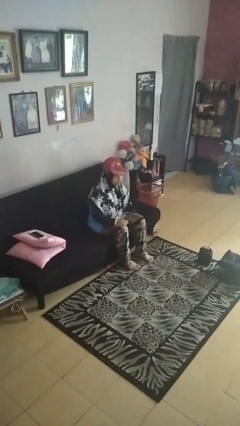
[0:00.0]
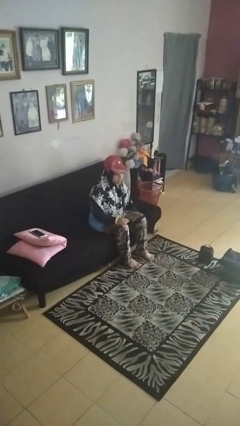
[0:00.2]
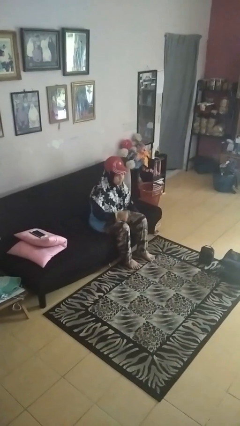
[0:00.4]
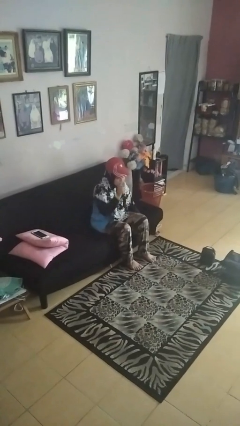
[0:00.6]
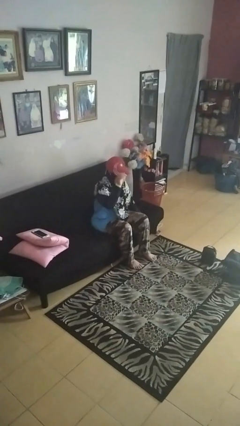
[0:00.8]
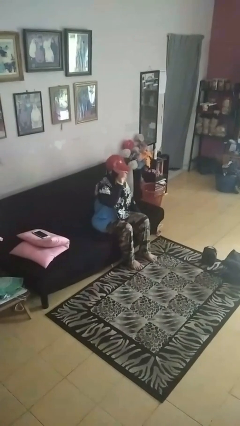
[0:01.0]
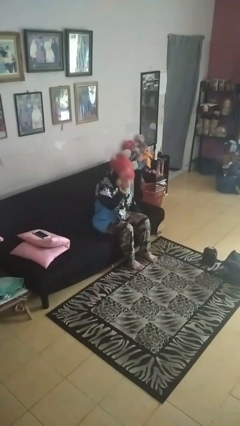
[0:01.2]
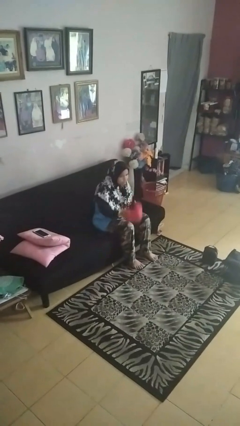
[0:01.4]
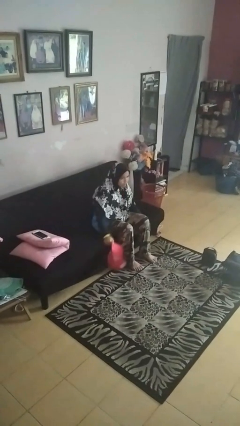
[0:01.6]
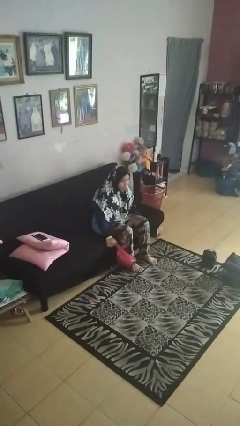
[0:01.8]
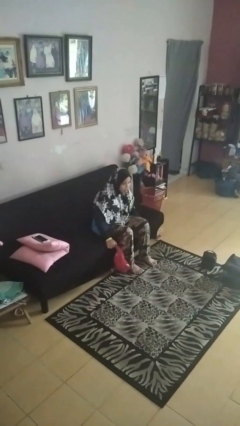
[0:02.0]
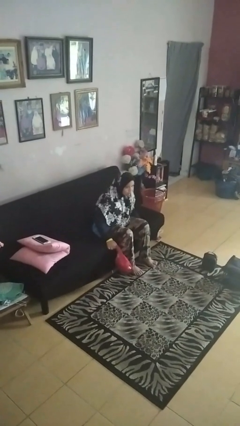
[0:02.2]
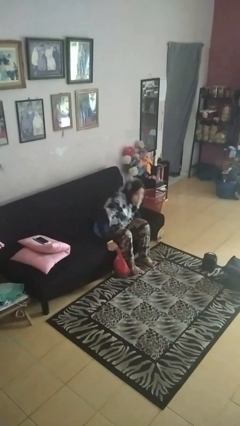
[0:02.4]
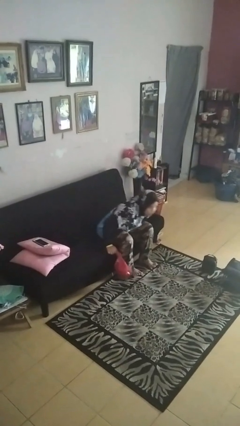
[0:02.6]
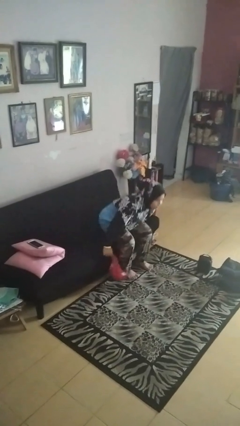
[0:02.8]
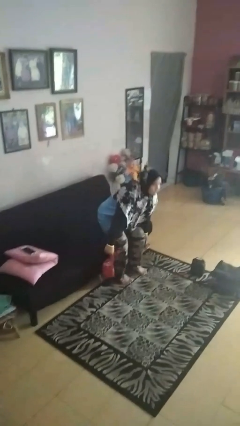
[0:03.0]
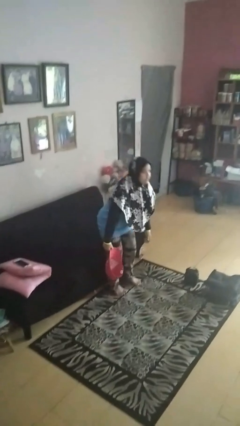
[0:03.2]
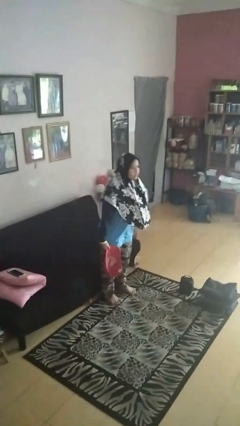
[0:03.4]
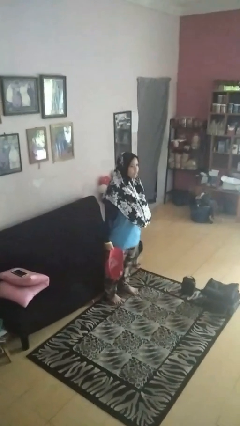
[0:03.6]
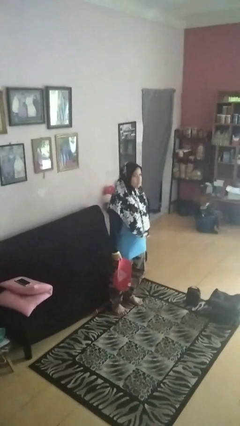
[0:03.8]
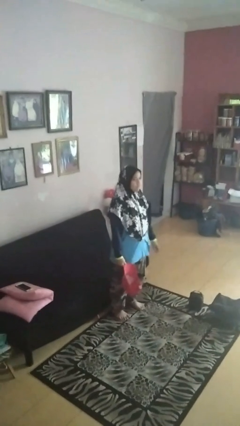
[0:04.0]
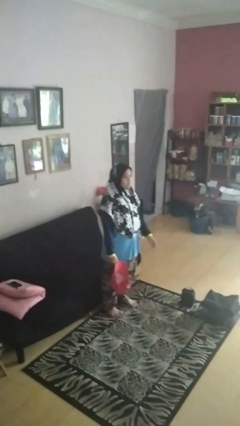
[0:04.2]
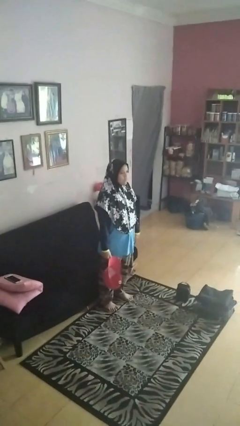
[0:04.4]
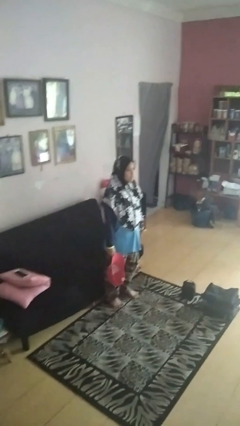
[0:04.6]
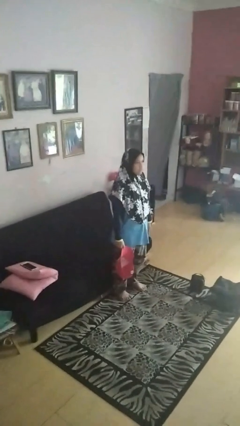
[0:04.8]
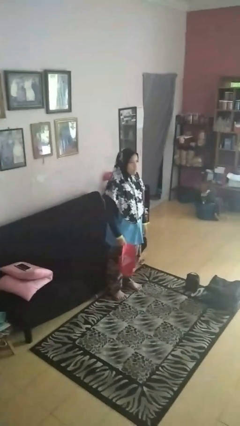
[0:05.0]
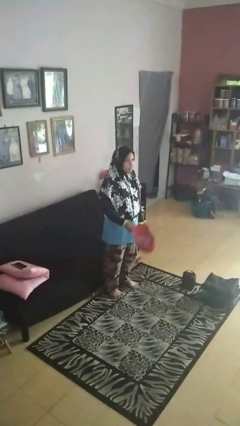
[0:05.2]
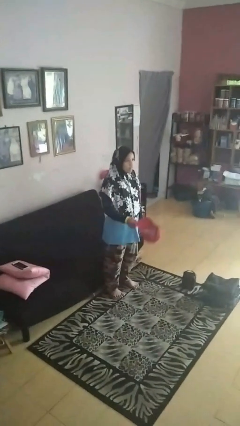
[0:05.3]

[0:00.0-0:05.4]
person takes off hat

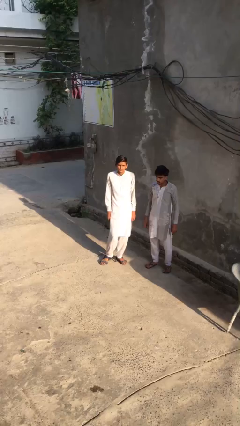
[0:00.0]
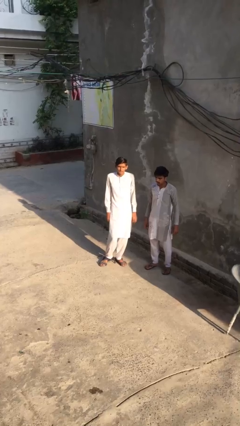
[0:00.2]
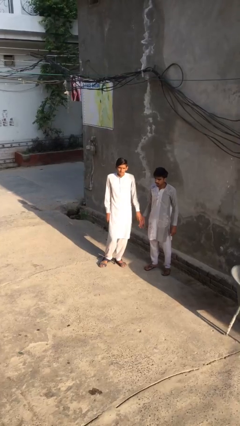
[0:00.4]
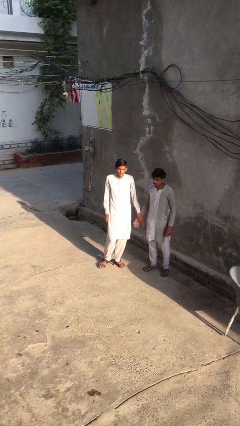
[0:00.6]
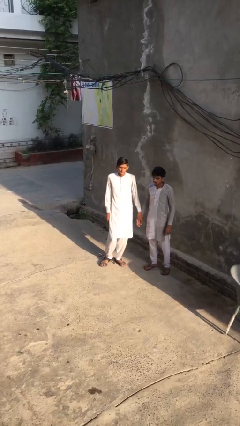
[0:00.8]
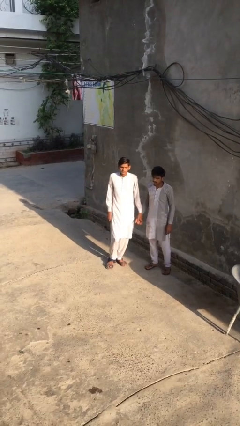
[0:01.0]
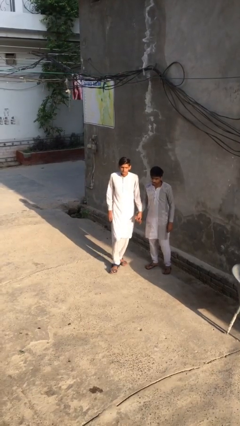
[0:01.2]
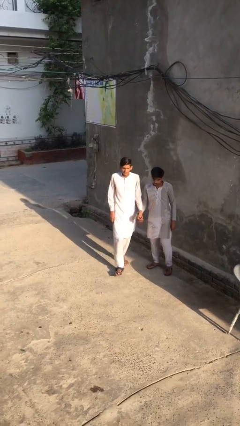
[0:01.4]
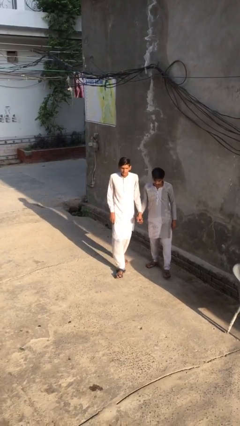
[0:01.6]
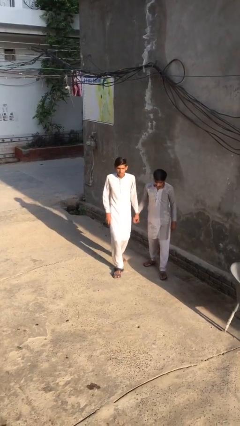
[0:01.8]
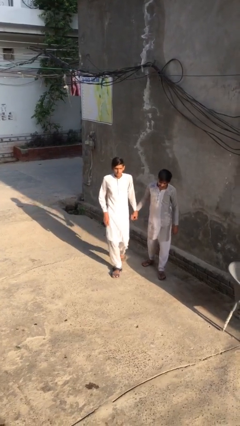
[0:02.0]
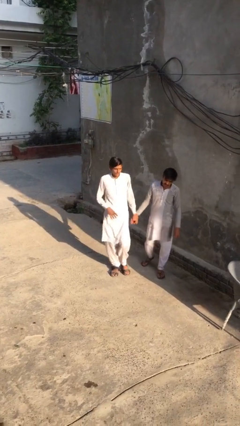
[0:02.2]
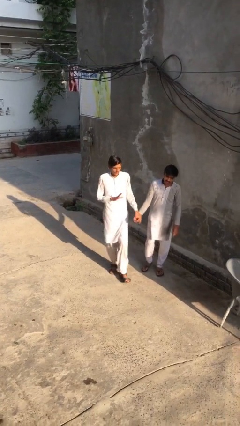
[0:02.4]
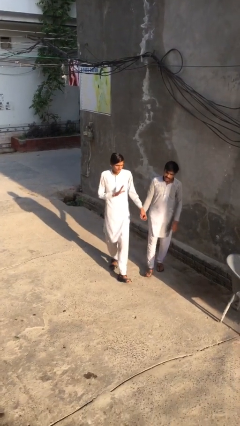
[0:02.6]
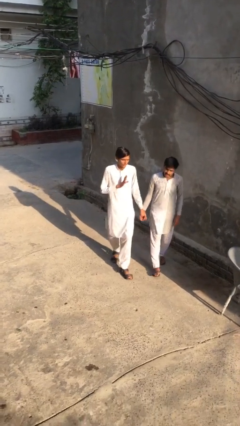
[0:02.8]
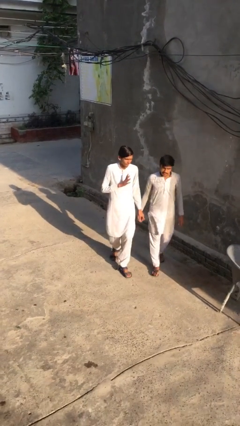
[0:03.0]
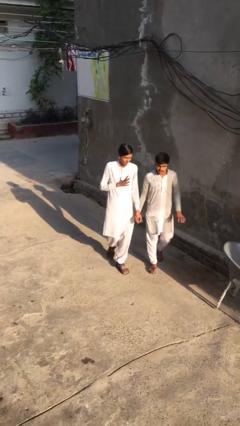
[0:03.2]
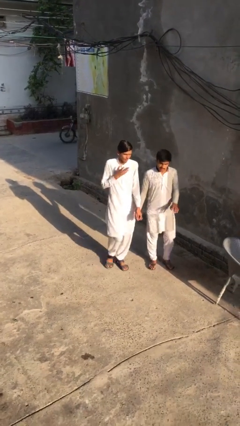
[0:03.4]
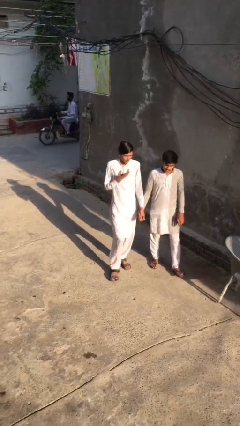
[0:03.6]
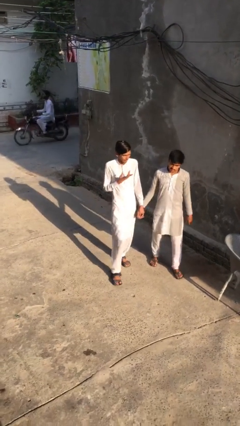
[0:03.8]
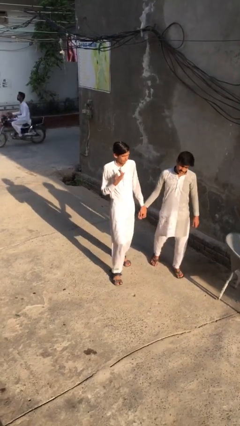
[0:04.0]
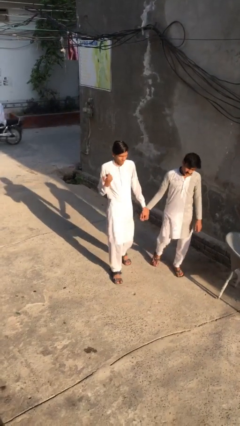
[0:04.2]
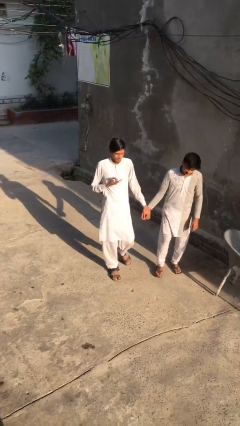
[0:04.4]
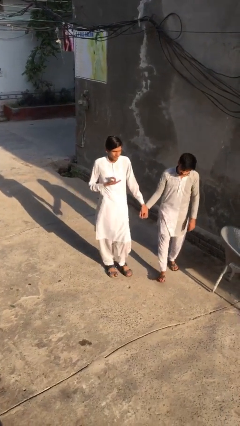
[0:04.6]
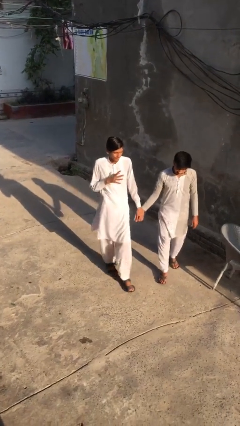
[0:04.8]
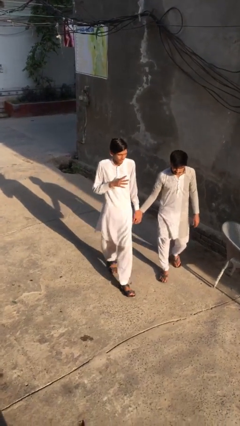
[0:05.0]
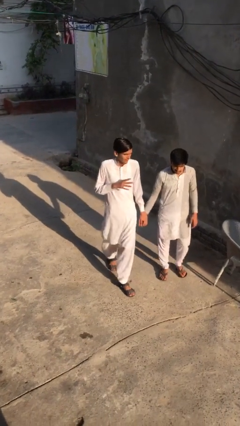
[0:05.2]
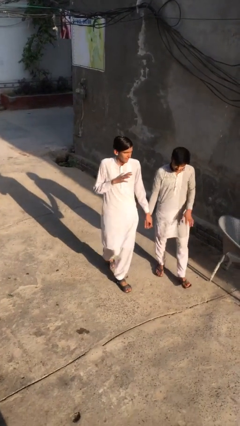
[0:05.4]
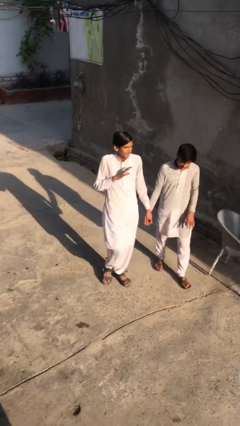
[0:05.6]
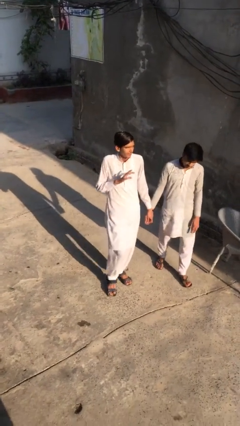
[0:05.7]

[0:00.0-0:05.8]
person holds hand

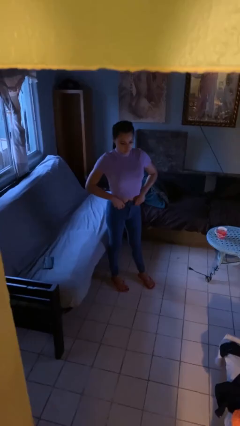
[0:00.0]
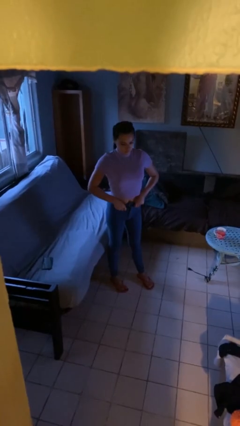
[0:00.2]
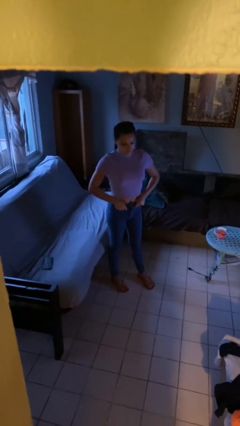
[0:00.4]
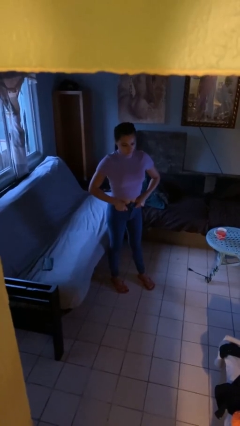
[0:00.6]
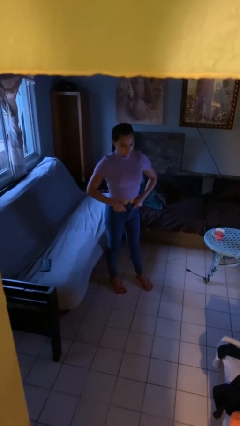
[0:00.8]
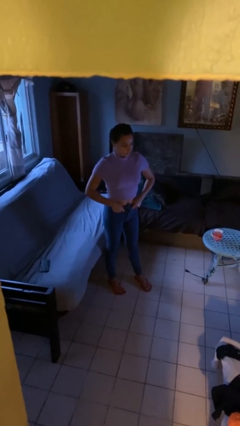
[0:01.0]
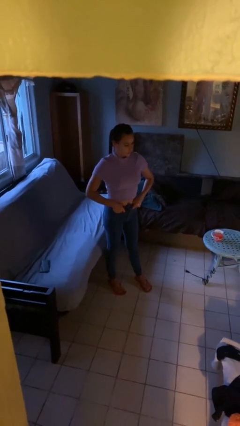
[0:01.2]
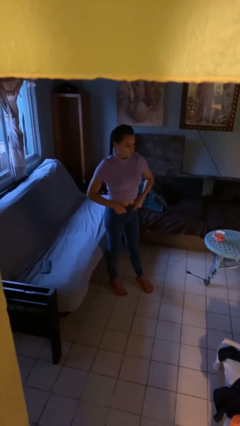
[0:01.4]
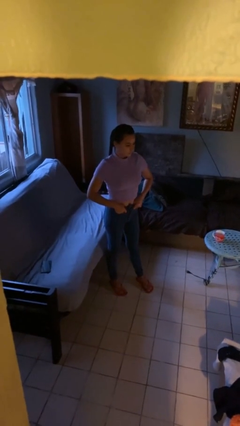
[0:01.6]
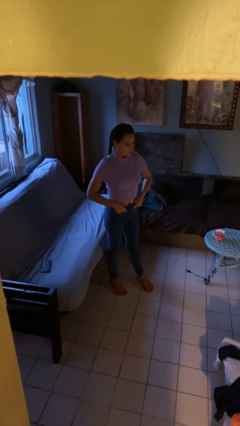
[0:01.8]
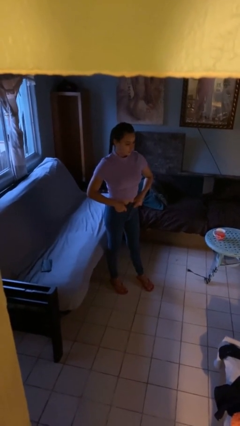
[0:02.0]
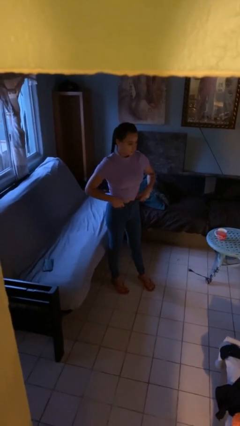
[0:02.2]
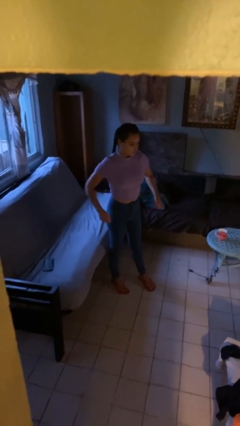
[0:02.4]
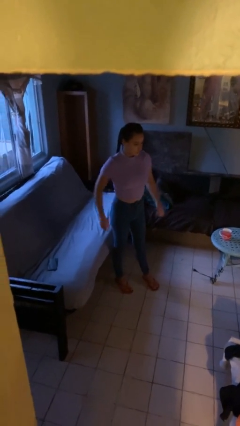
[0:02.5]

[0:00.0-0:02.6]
person puts hands in back pockets

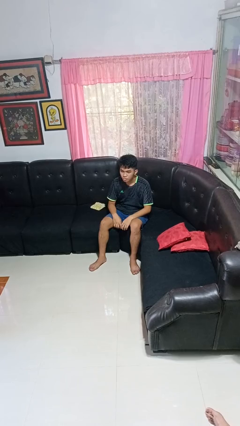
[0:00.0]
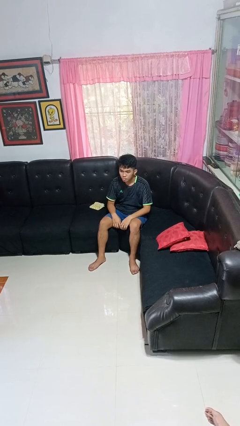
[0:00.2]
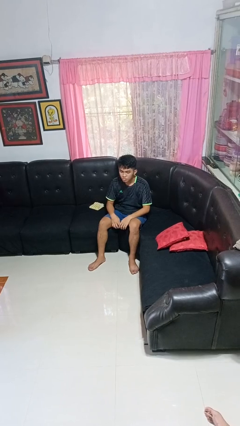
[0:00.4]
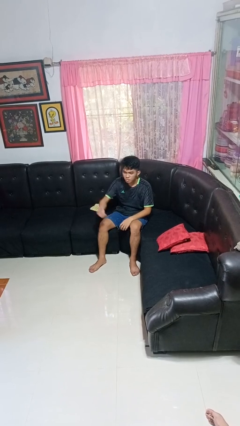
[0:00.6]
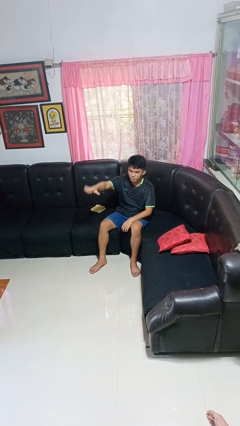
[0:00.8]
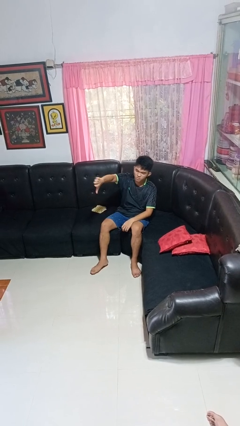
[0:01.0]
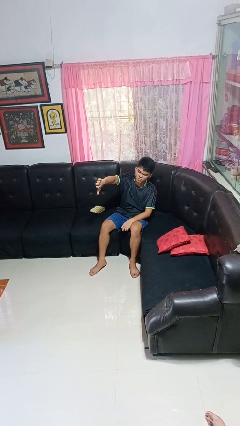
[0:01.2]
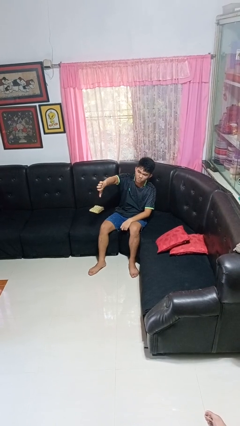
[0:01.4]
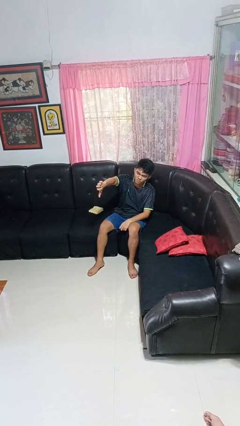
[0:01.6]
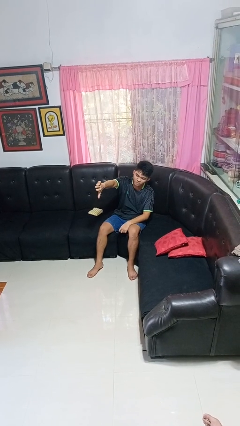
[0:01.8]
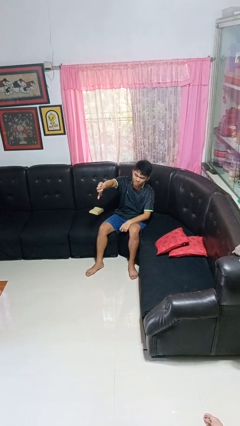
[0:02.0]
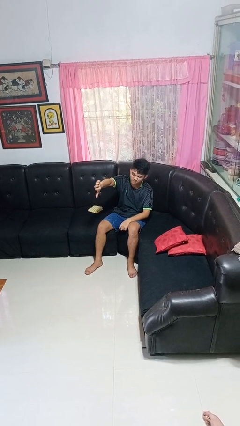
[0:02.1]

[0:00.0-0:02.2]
person gestures thumbs down

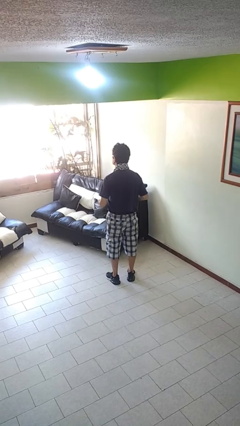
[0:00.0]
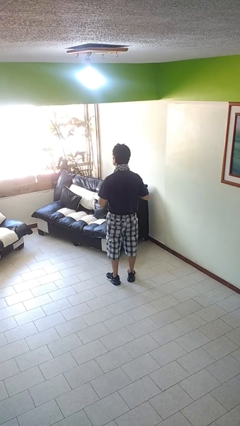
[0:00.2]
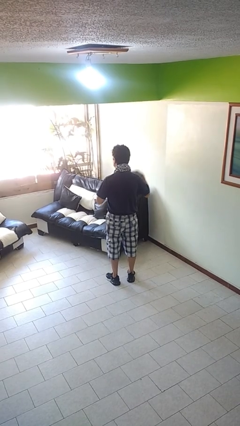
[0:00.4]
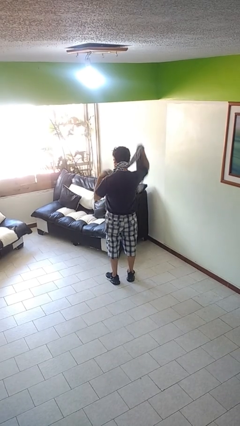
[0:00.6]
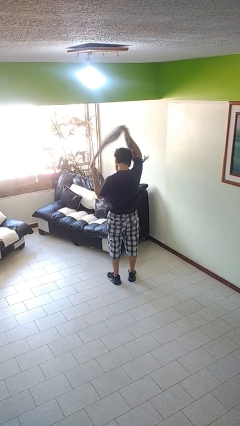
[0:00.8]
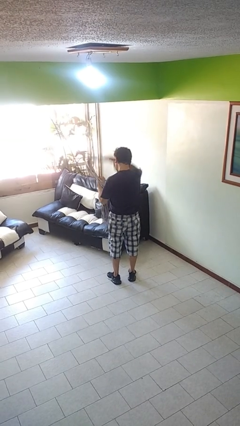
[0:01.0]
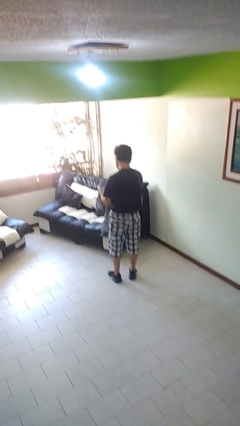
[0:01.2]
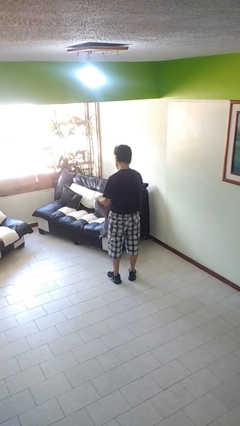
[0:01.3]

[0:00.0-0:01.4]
person takes off scarf
